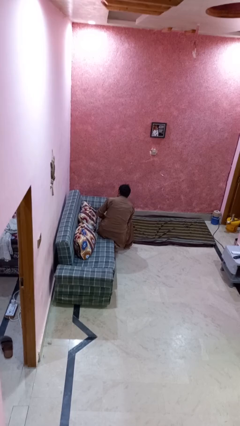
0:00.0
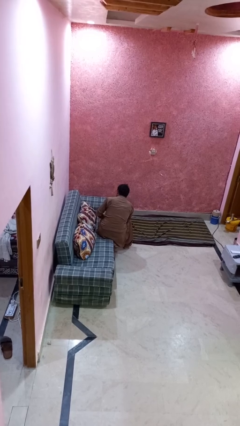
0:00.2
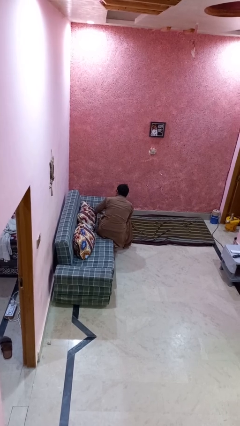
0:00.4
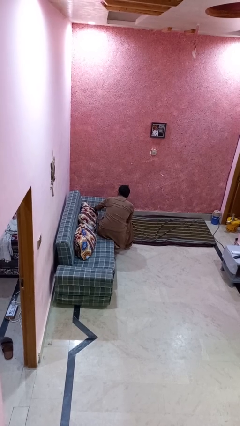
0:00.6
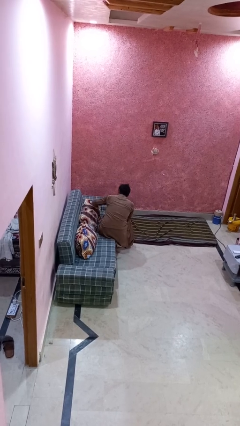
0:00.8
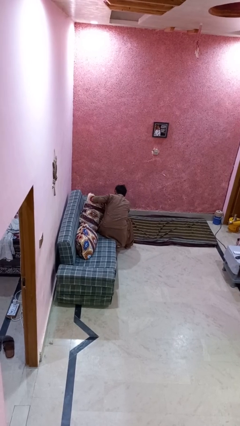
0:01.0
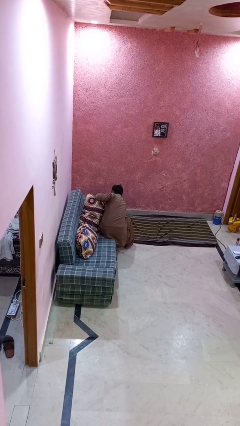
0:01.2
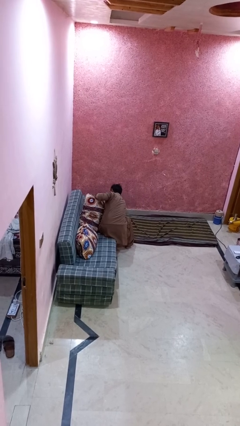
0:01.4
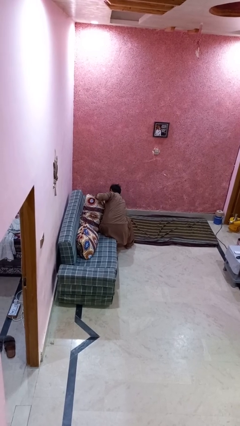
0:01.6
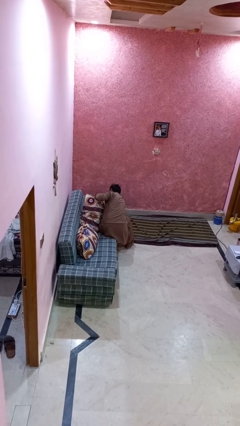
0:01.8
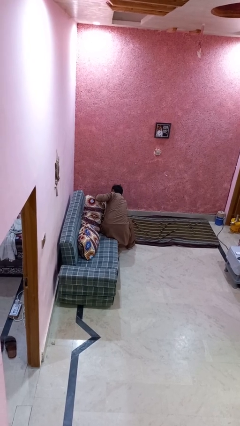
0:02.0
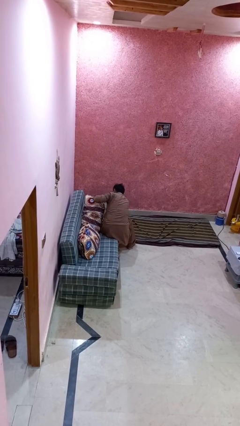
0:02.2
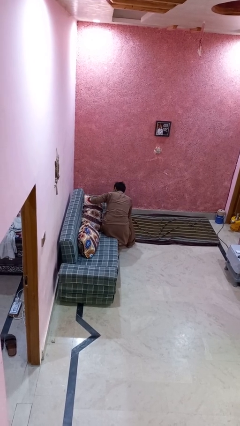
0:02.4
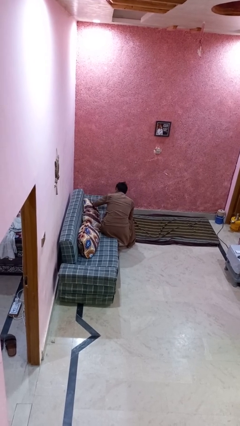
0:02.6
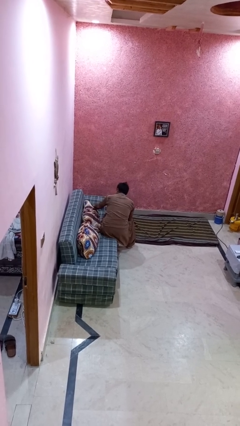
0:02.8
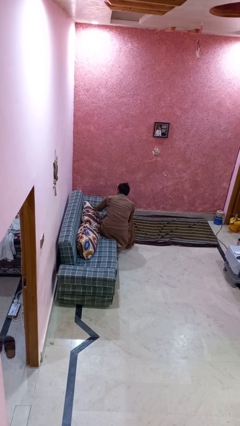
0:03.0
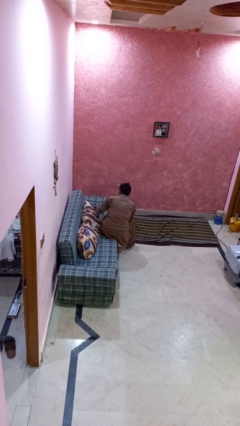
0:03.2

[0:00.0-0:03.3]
person searches in couch

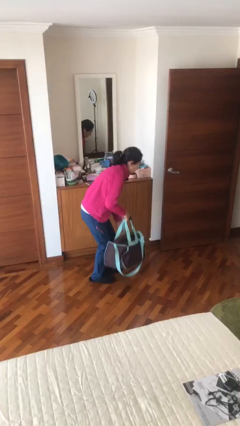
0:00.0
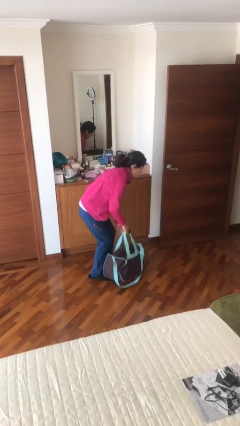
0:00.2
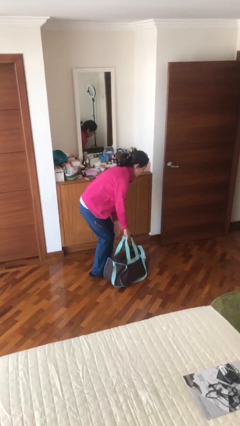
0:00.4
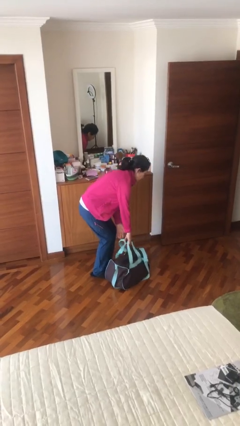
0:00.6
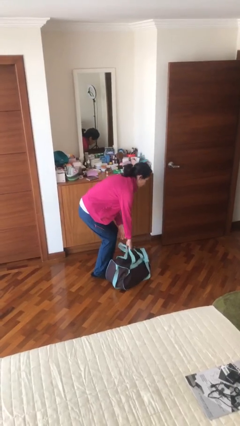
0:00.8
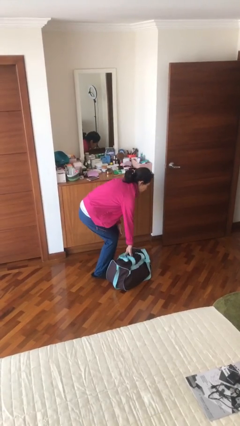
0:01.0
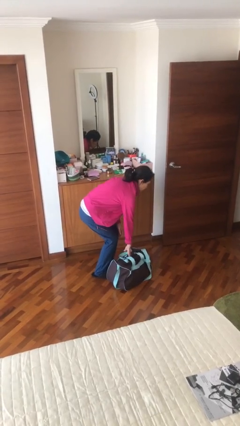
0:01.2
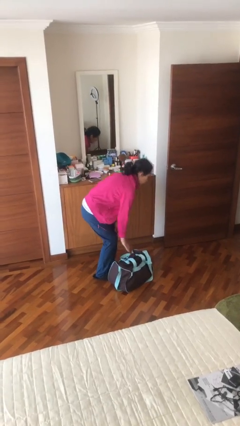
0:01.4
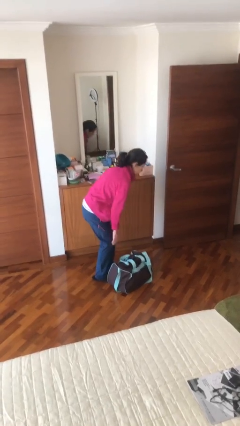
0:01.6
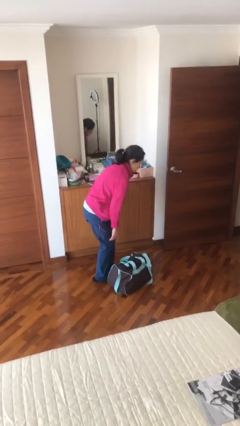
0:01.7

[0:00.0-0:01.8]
person puts down object on floor

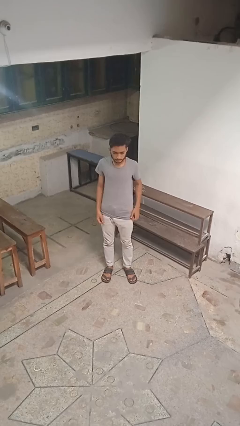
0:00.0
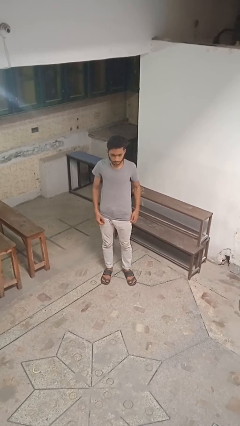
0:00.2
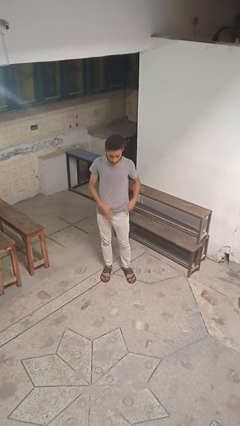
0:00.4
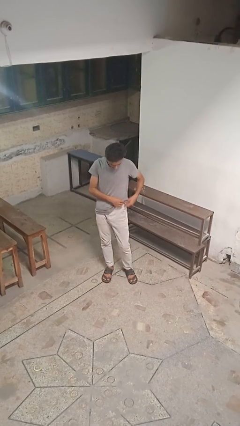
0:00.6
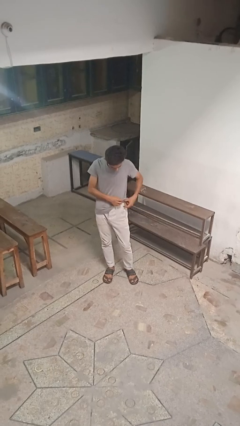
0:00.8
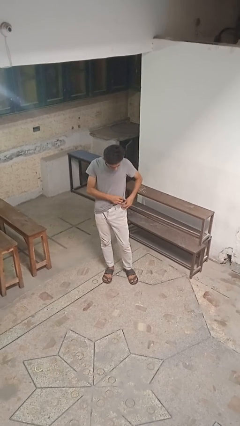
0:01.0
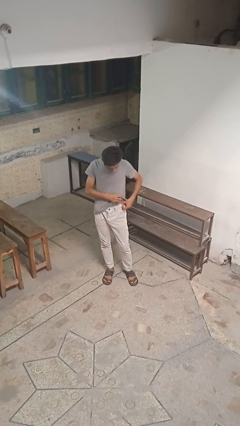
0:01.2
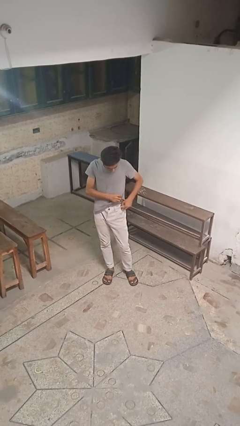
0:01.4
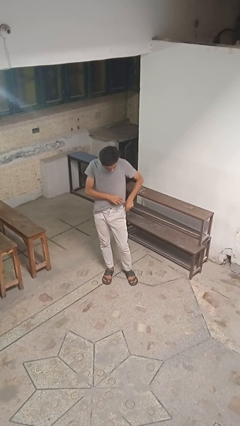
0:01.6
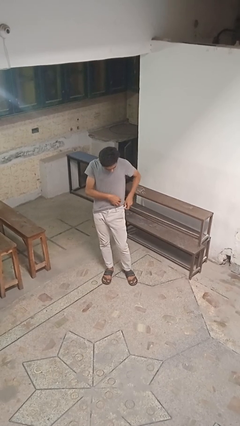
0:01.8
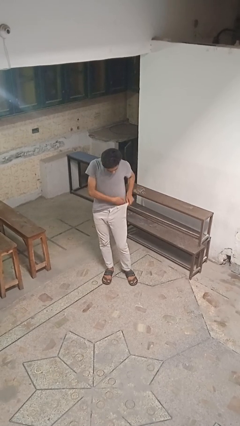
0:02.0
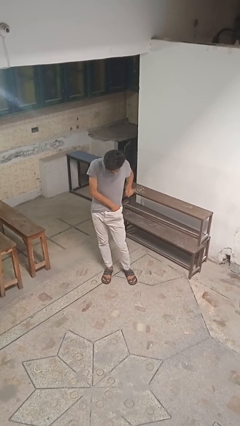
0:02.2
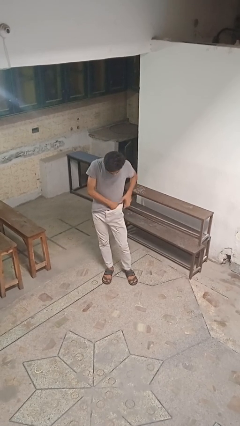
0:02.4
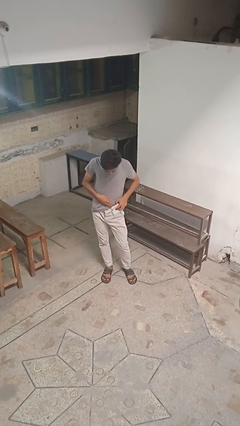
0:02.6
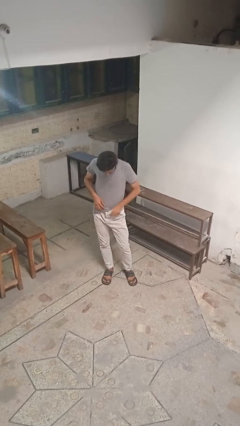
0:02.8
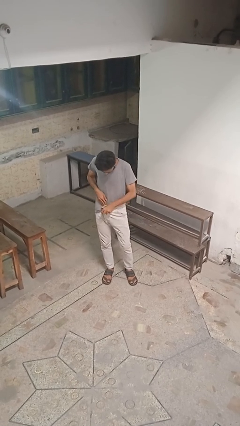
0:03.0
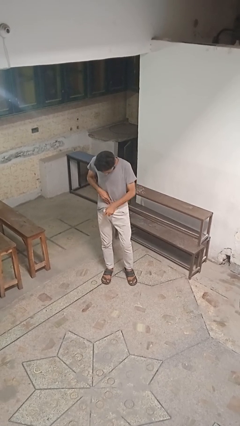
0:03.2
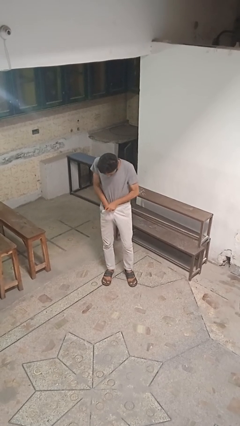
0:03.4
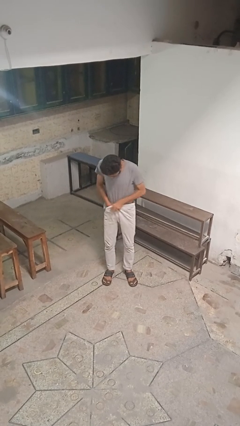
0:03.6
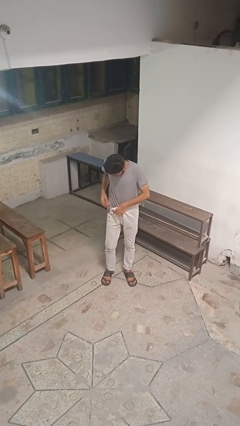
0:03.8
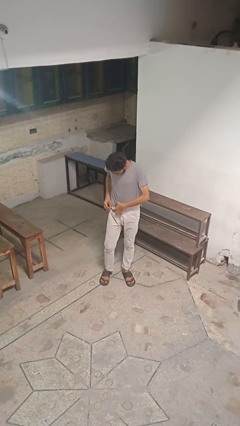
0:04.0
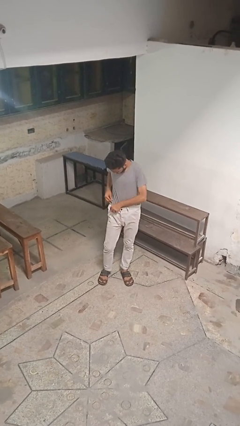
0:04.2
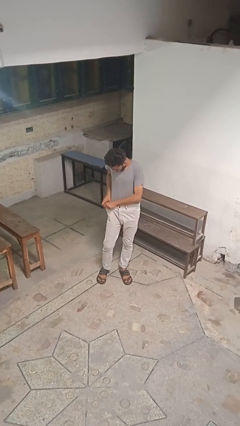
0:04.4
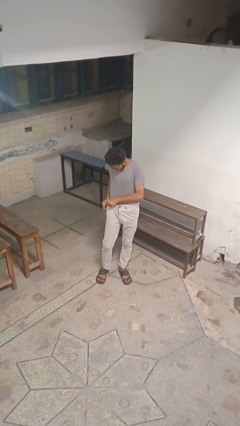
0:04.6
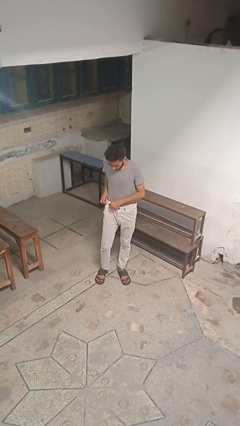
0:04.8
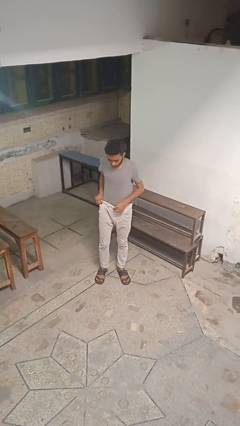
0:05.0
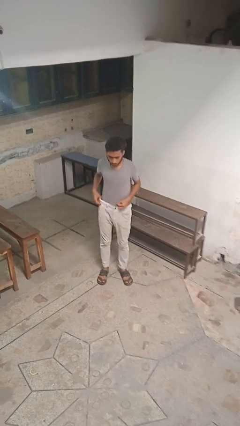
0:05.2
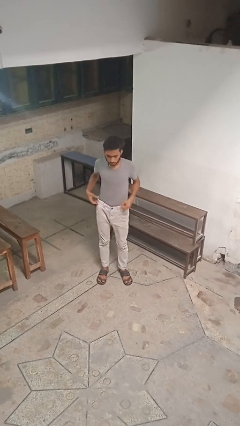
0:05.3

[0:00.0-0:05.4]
person tucks in shirt

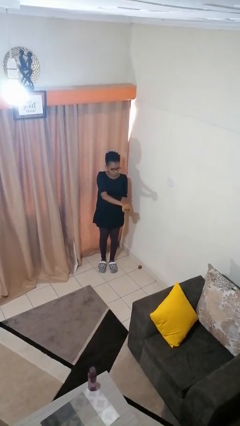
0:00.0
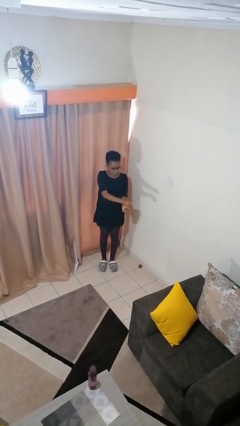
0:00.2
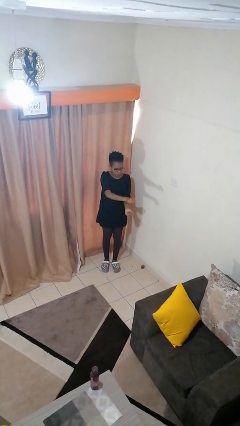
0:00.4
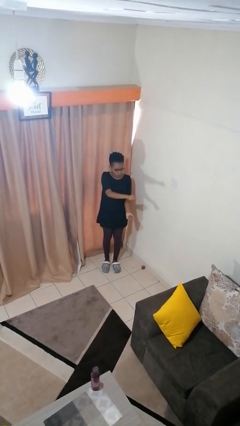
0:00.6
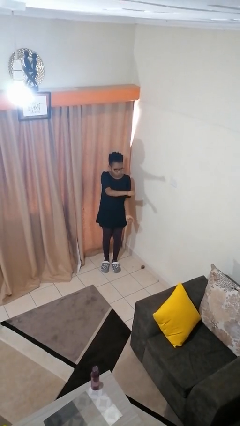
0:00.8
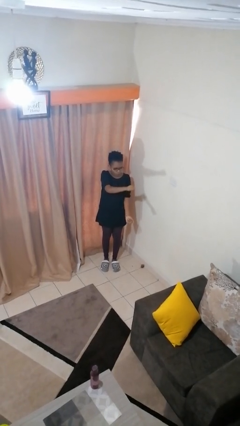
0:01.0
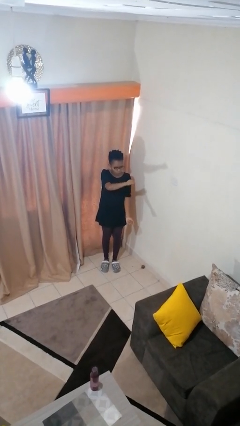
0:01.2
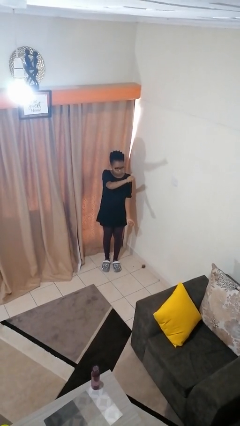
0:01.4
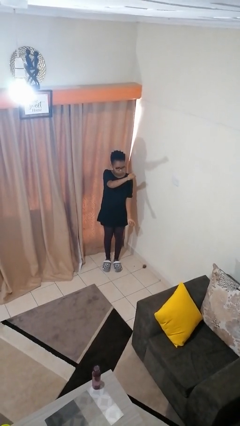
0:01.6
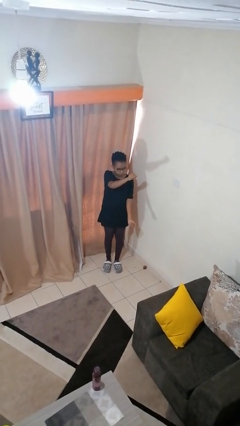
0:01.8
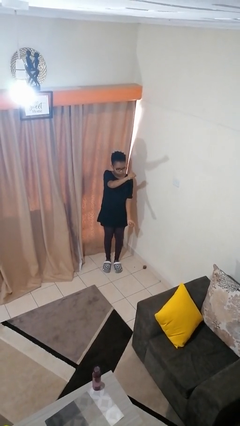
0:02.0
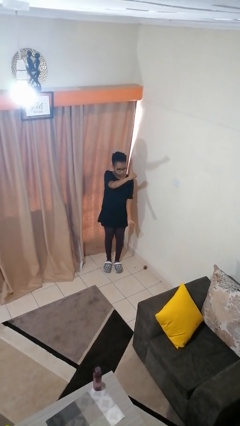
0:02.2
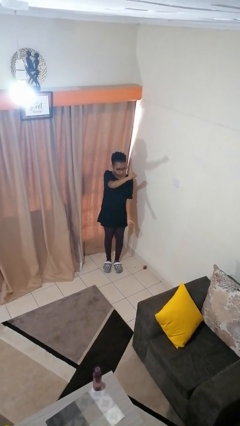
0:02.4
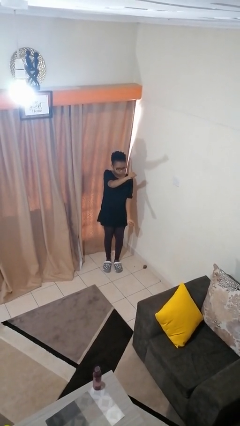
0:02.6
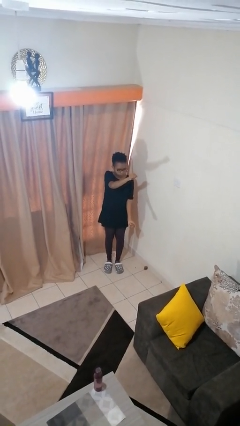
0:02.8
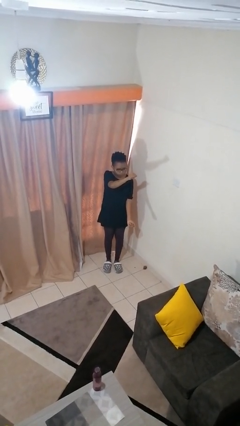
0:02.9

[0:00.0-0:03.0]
person gestures zoom in

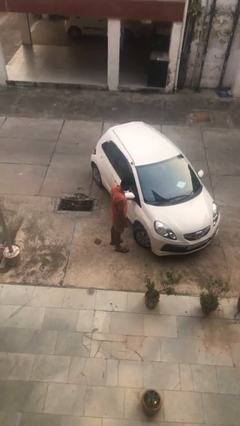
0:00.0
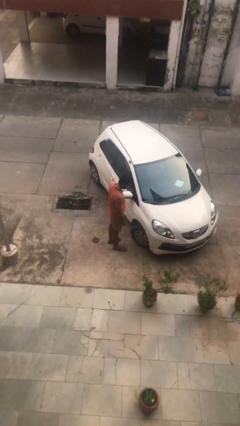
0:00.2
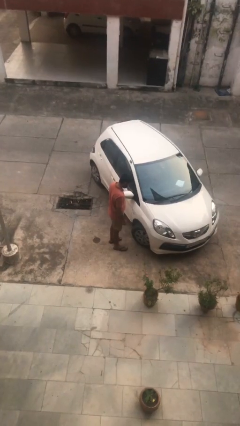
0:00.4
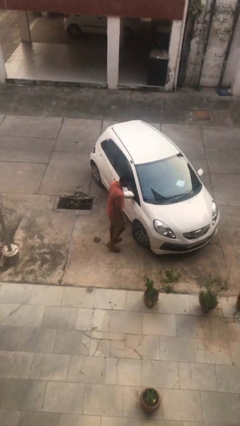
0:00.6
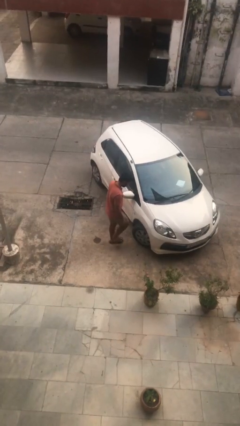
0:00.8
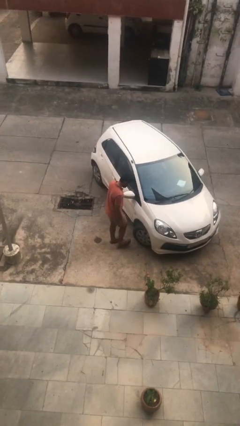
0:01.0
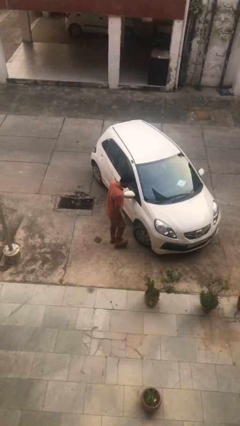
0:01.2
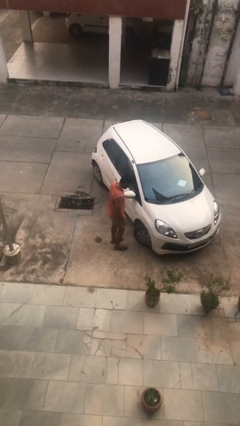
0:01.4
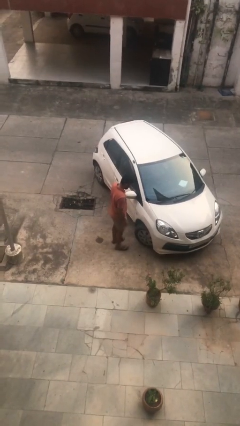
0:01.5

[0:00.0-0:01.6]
person kicks car tires

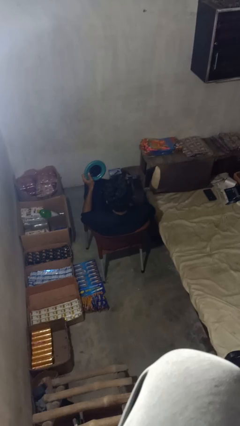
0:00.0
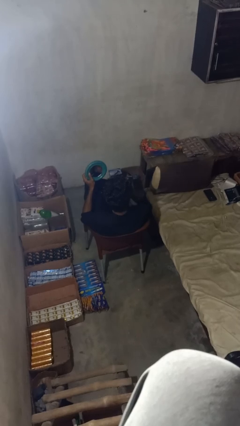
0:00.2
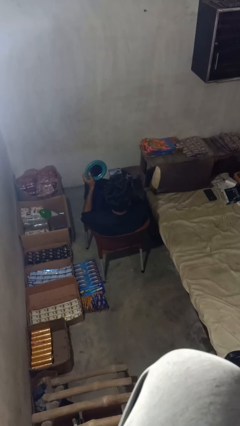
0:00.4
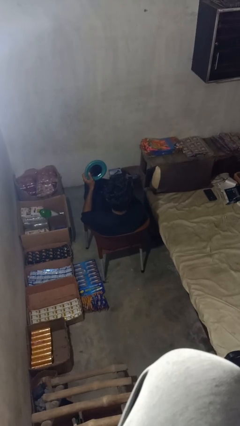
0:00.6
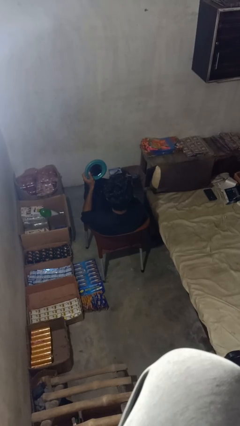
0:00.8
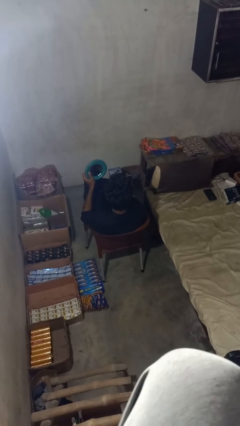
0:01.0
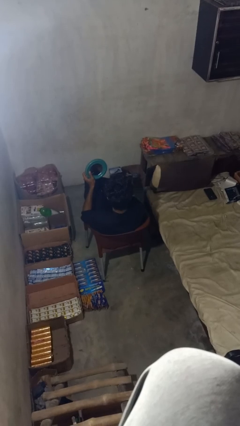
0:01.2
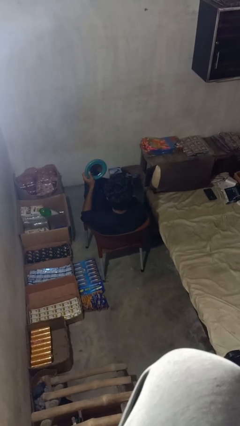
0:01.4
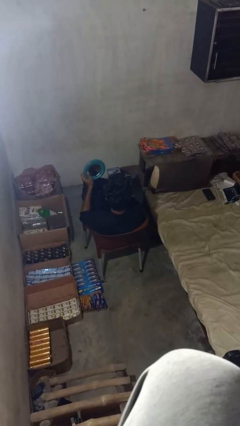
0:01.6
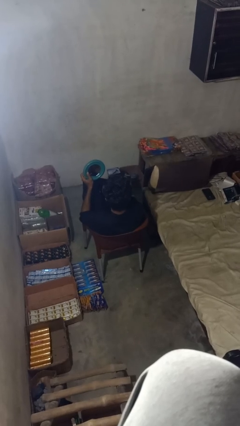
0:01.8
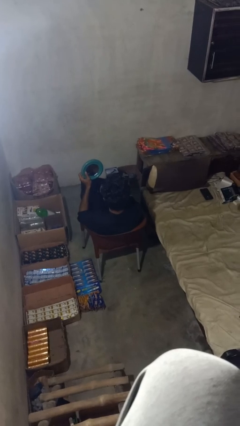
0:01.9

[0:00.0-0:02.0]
person applies eye makeup

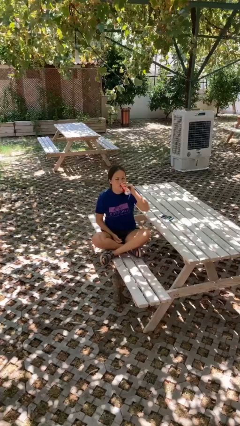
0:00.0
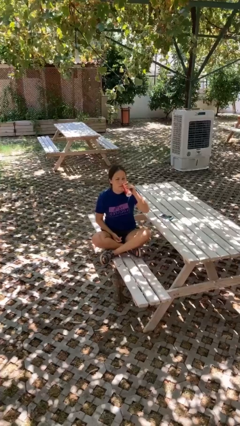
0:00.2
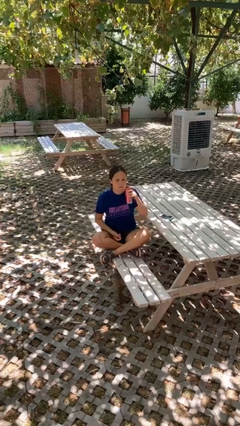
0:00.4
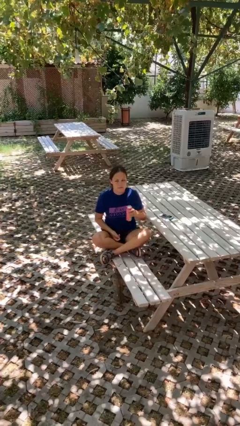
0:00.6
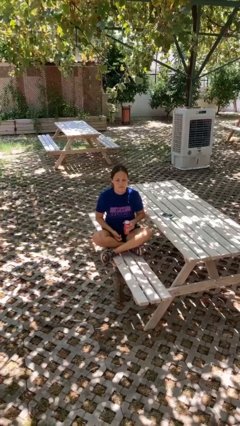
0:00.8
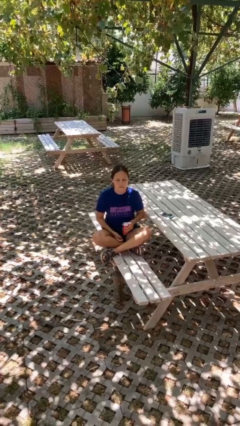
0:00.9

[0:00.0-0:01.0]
person drinks from beverage can
